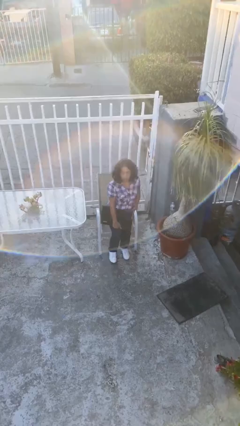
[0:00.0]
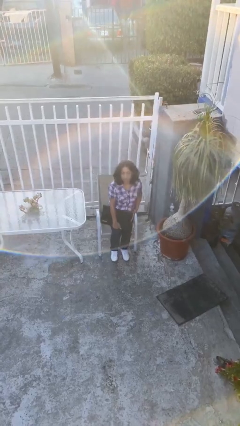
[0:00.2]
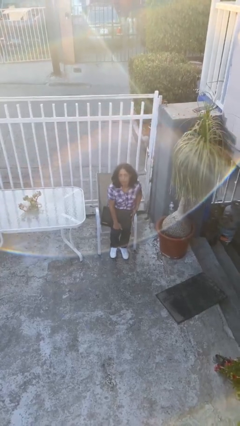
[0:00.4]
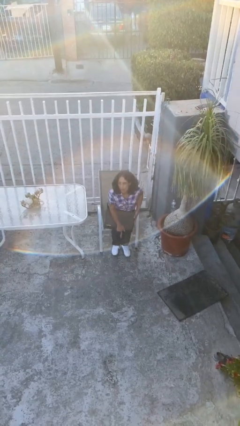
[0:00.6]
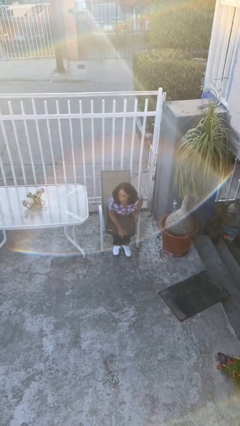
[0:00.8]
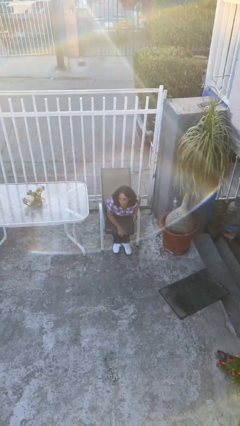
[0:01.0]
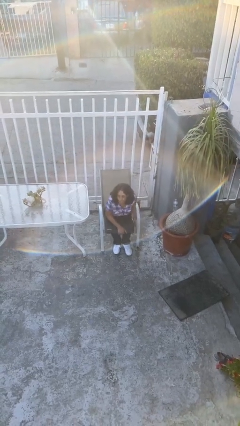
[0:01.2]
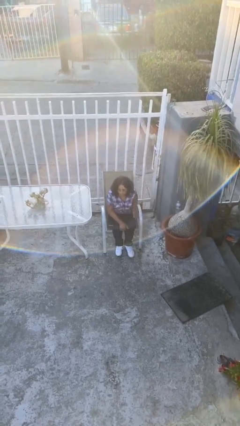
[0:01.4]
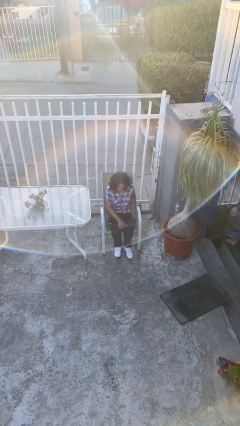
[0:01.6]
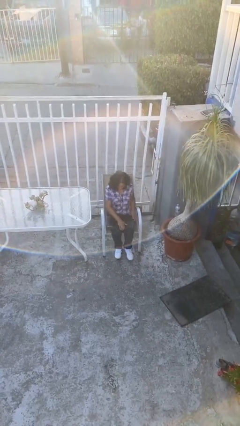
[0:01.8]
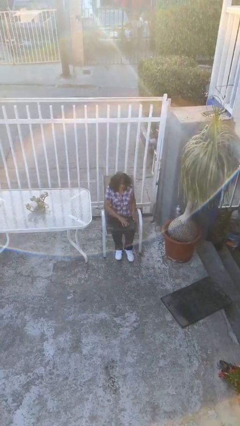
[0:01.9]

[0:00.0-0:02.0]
person sits down

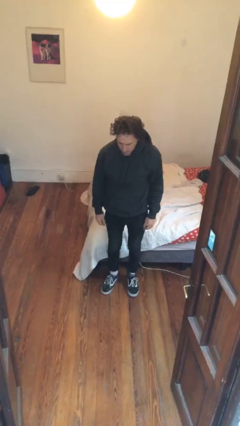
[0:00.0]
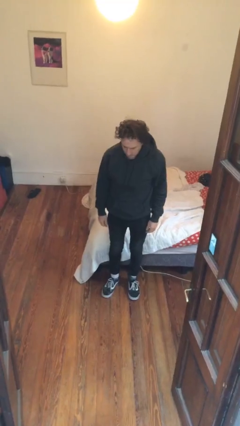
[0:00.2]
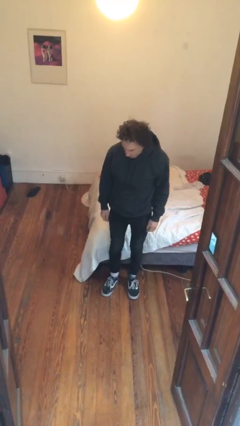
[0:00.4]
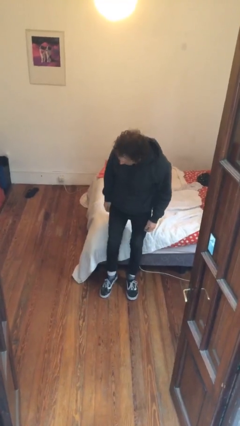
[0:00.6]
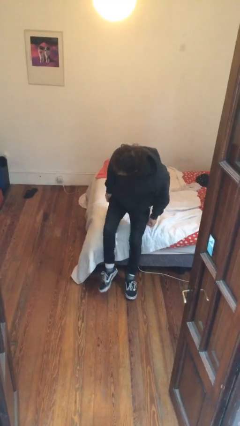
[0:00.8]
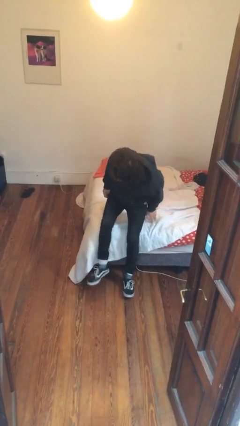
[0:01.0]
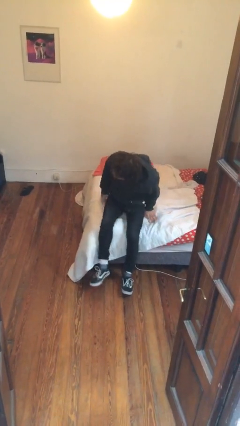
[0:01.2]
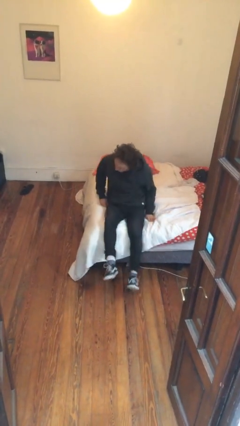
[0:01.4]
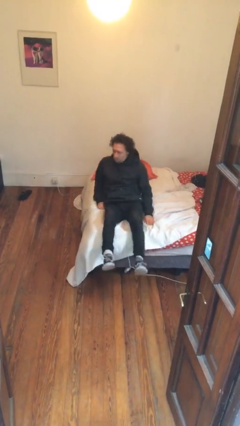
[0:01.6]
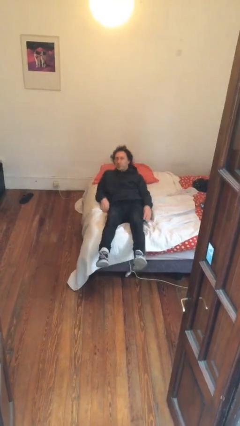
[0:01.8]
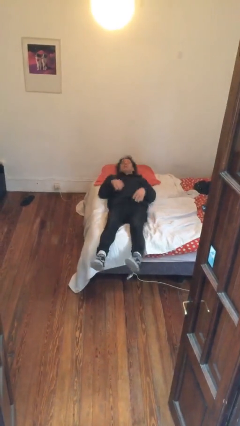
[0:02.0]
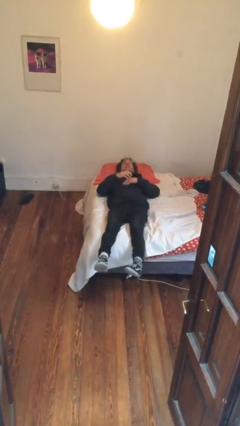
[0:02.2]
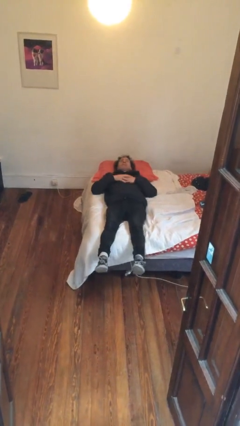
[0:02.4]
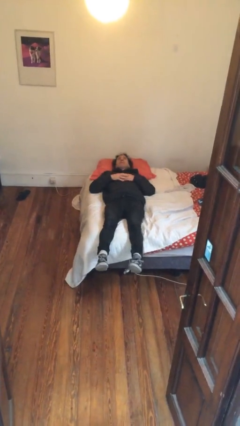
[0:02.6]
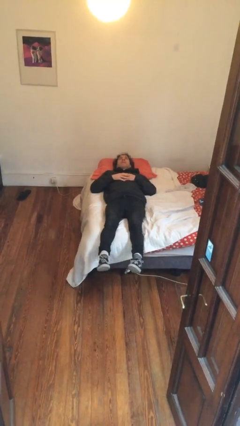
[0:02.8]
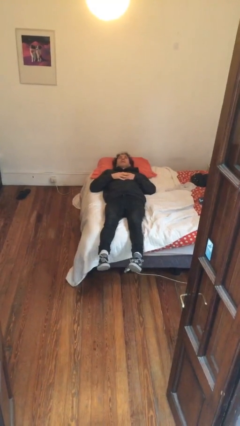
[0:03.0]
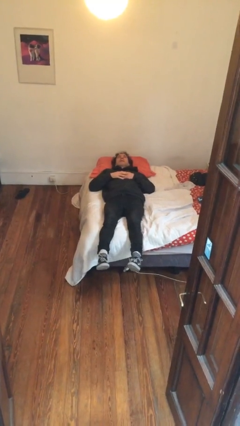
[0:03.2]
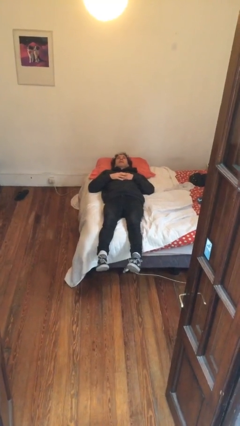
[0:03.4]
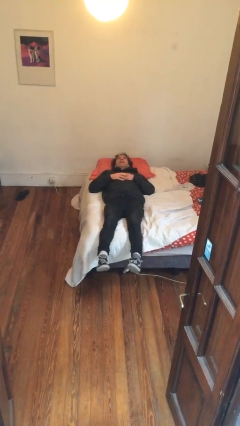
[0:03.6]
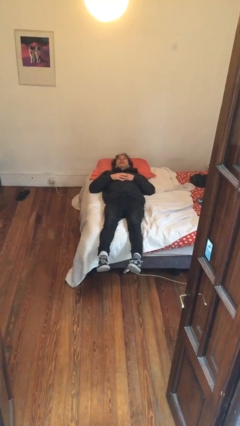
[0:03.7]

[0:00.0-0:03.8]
person lies down on bed

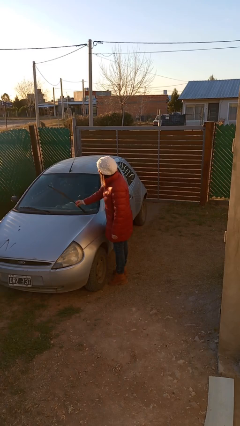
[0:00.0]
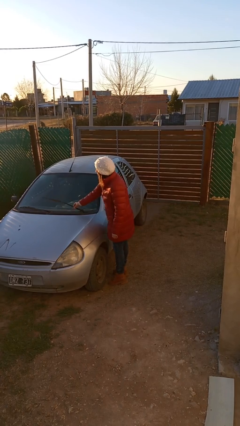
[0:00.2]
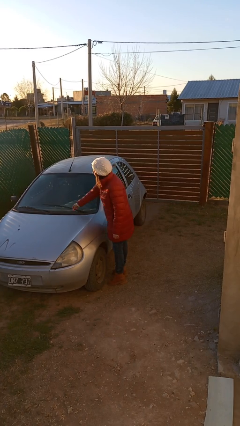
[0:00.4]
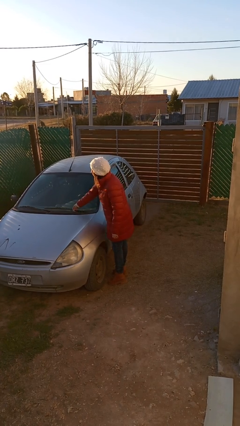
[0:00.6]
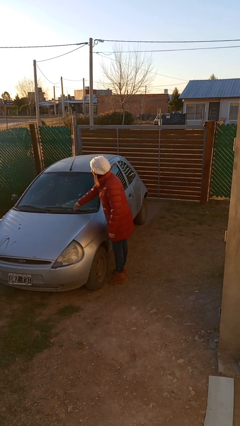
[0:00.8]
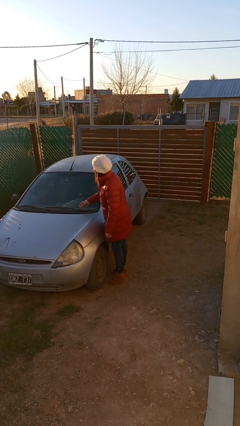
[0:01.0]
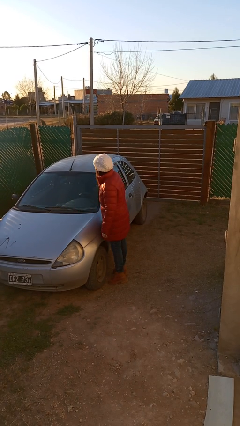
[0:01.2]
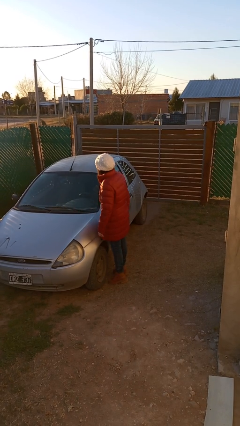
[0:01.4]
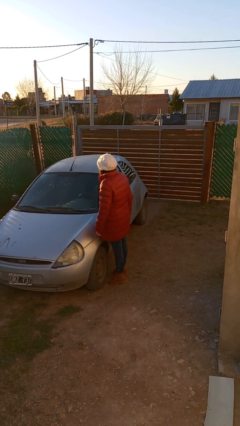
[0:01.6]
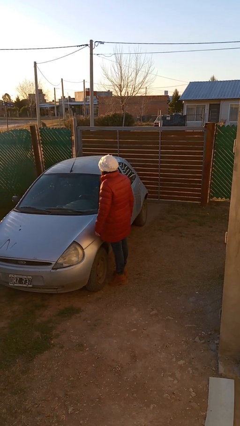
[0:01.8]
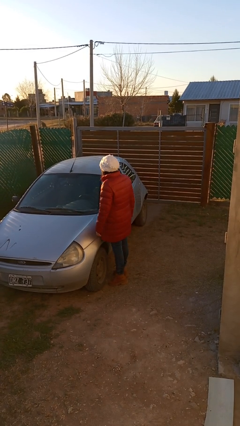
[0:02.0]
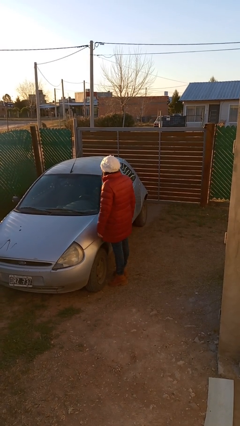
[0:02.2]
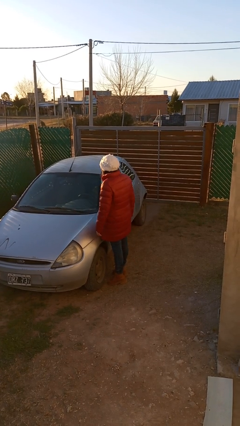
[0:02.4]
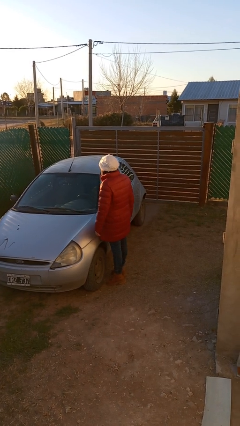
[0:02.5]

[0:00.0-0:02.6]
person flips down car wipers

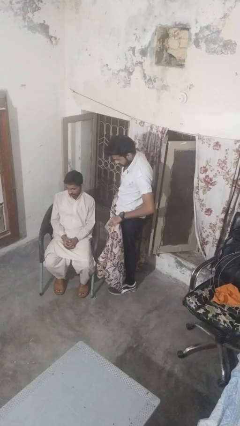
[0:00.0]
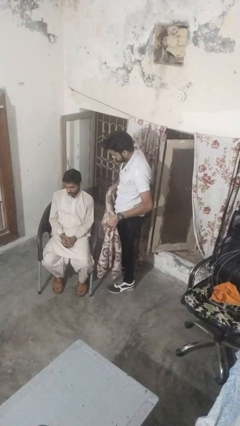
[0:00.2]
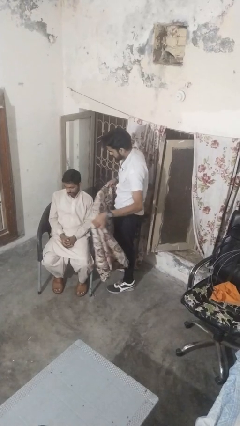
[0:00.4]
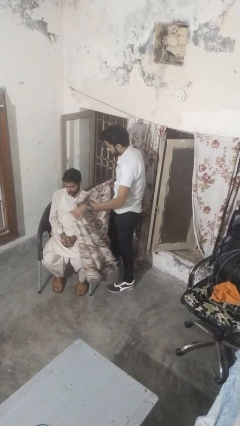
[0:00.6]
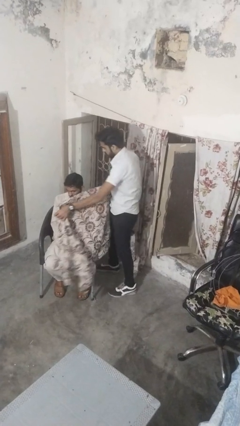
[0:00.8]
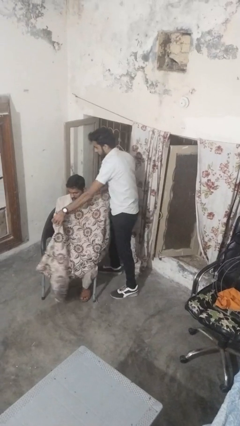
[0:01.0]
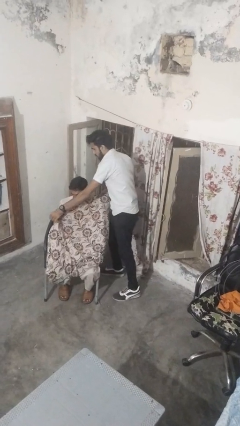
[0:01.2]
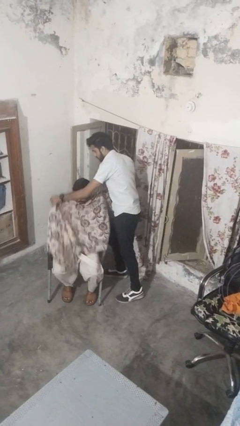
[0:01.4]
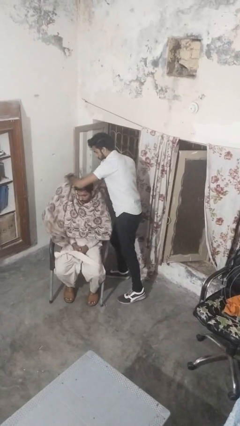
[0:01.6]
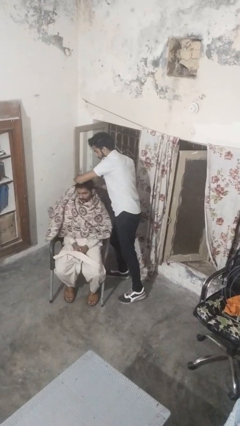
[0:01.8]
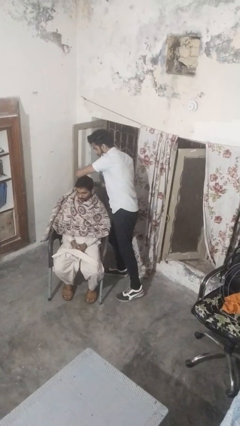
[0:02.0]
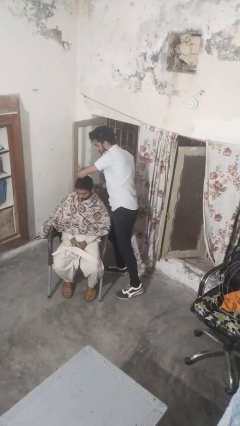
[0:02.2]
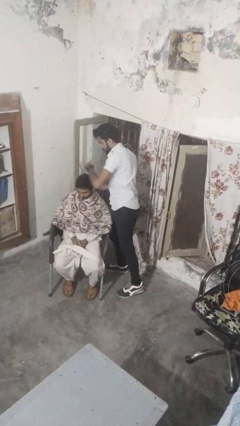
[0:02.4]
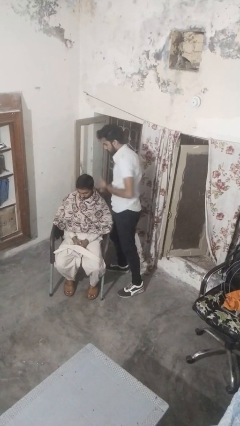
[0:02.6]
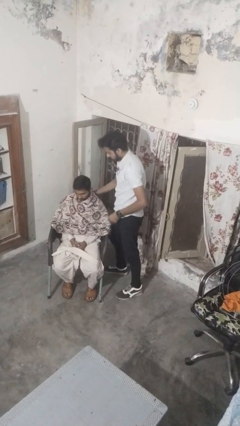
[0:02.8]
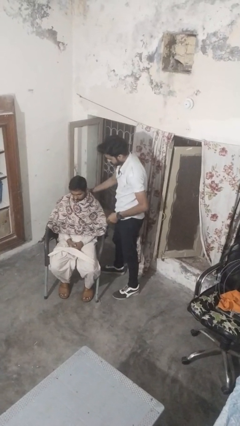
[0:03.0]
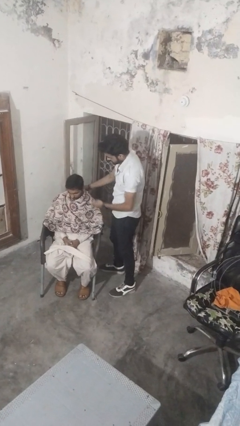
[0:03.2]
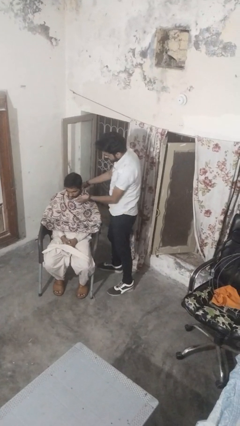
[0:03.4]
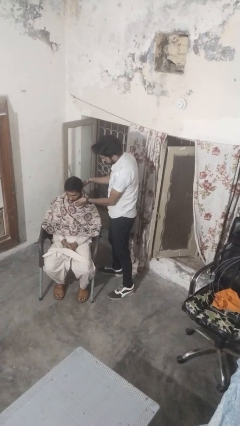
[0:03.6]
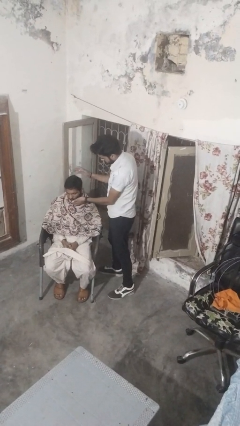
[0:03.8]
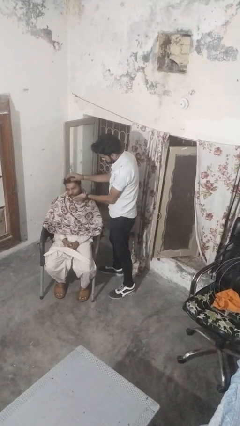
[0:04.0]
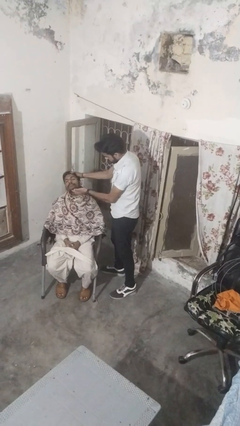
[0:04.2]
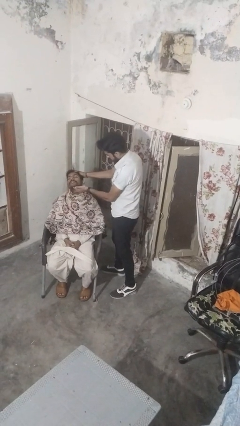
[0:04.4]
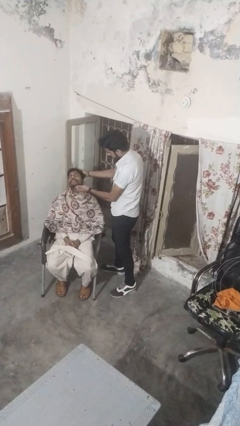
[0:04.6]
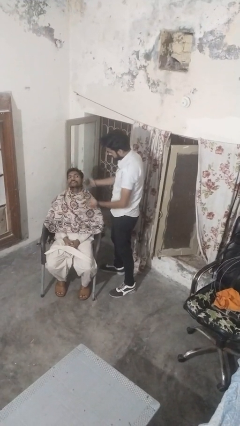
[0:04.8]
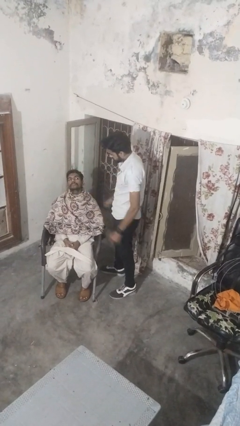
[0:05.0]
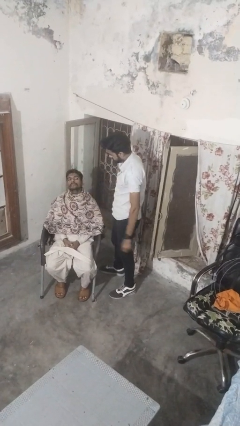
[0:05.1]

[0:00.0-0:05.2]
person covers friend with blanket

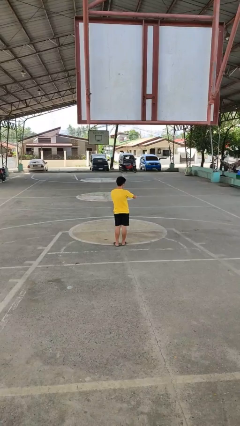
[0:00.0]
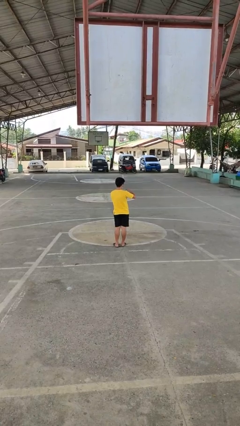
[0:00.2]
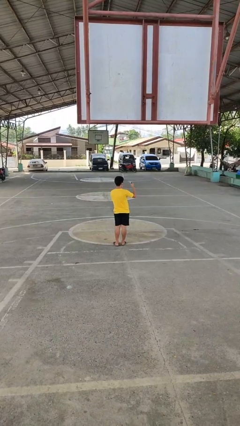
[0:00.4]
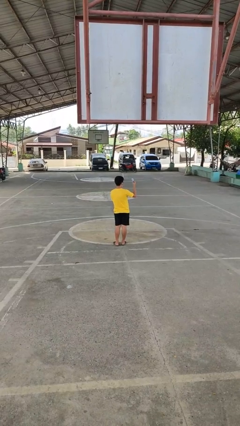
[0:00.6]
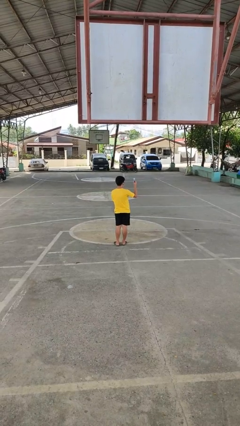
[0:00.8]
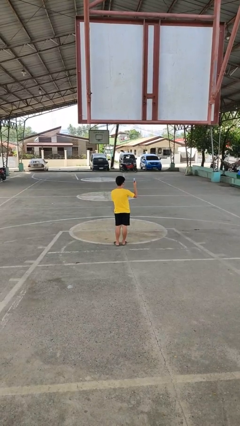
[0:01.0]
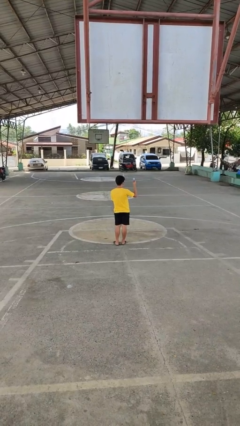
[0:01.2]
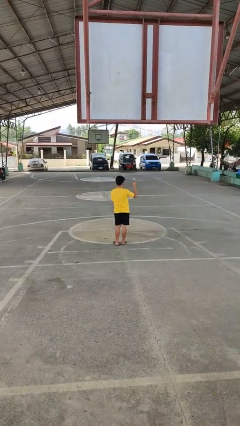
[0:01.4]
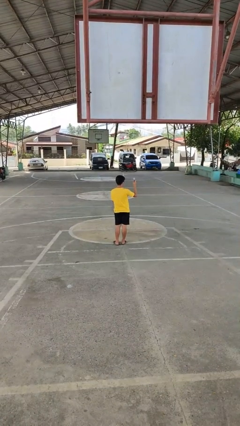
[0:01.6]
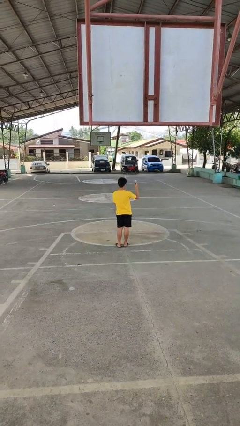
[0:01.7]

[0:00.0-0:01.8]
person takes object from purse

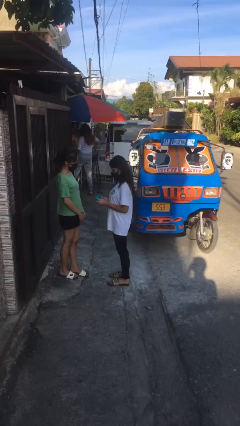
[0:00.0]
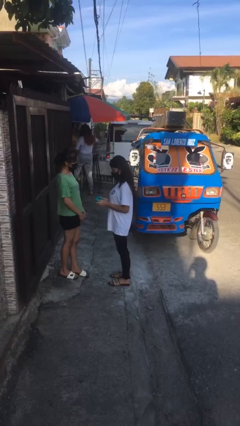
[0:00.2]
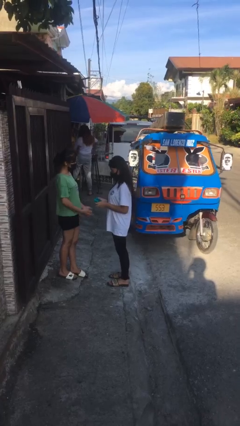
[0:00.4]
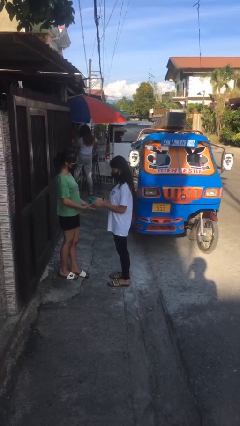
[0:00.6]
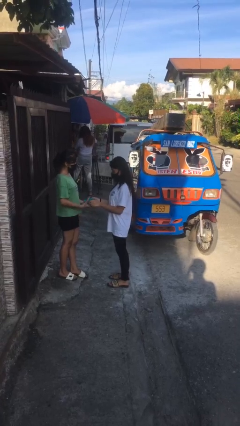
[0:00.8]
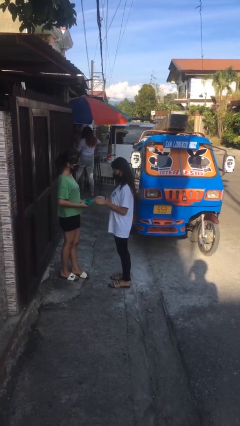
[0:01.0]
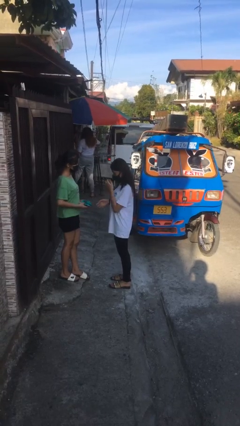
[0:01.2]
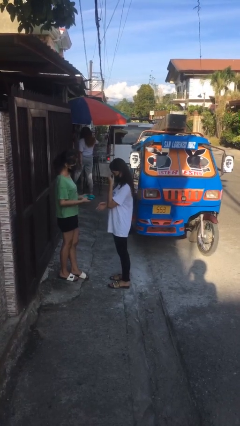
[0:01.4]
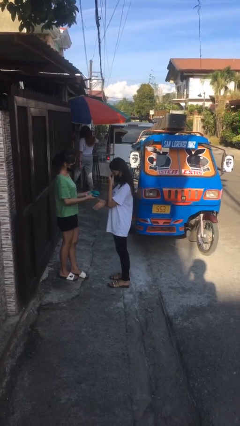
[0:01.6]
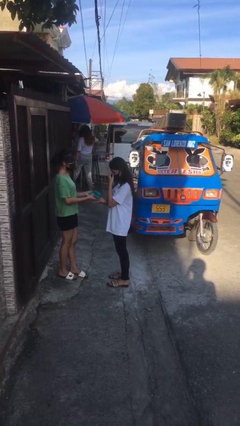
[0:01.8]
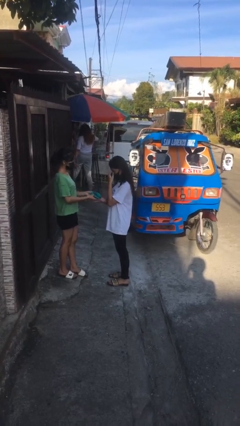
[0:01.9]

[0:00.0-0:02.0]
person transfers object to person

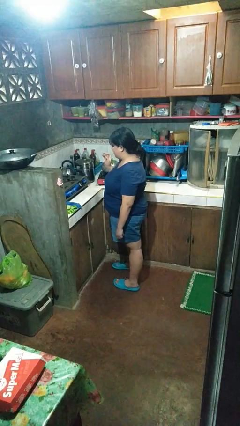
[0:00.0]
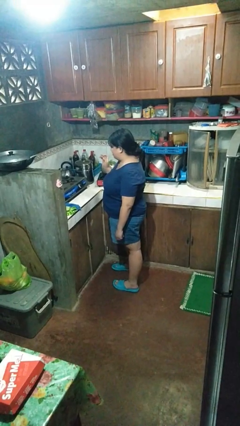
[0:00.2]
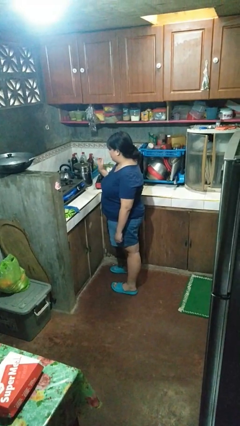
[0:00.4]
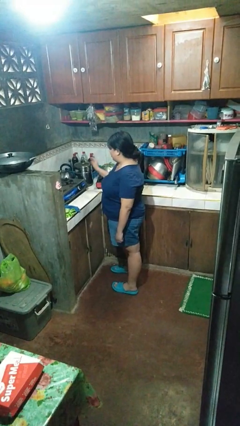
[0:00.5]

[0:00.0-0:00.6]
person burns hand
